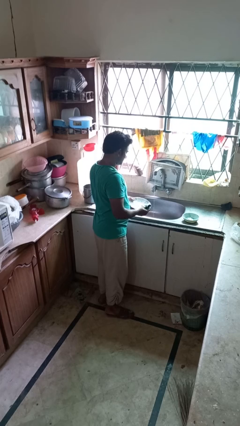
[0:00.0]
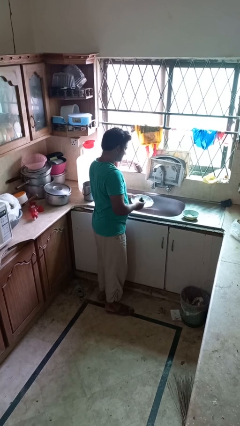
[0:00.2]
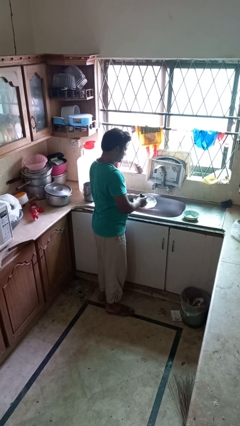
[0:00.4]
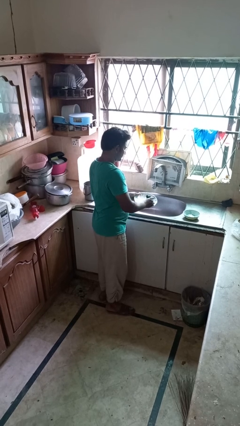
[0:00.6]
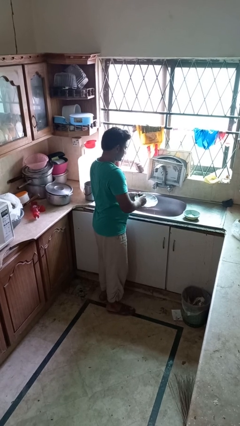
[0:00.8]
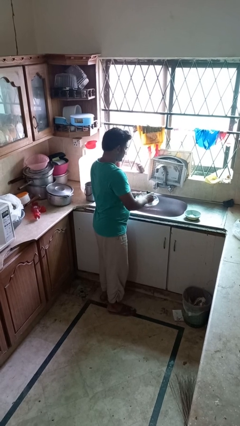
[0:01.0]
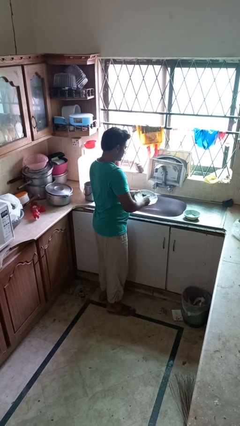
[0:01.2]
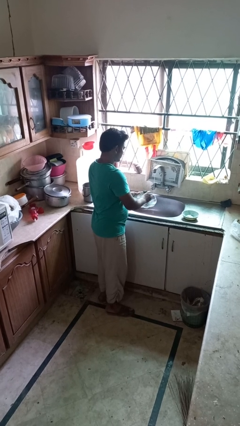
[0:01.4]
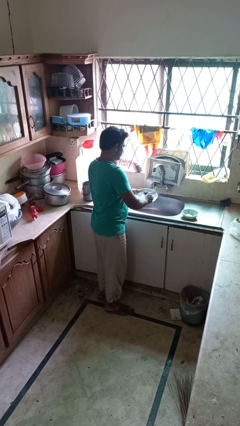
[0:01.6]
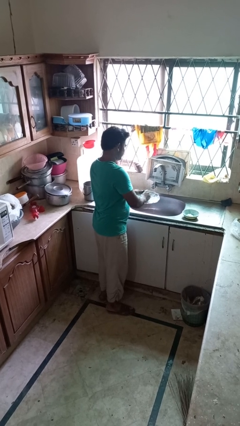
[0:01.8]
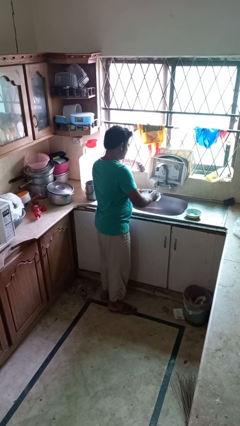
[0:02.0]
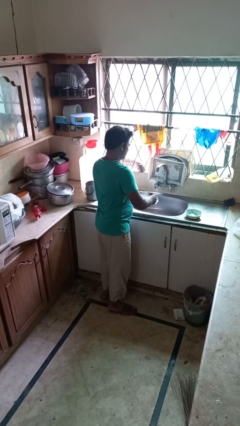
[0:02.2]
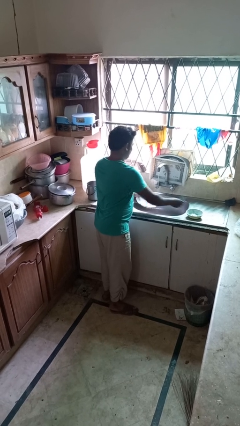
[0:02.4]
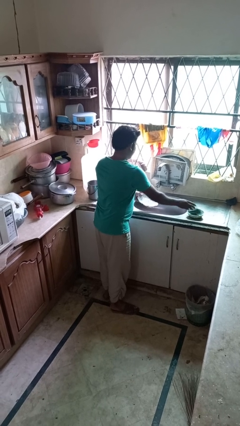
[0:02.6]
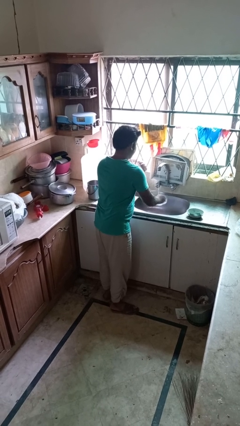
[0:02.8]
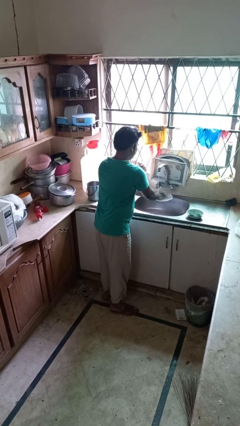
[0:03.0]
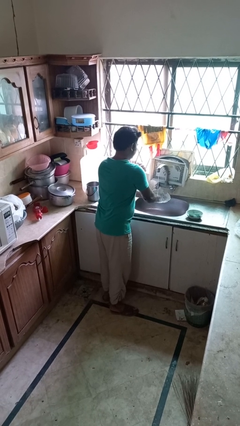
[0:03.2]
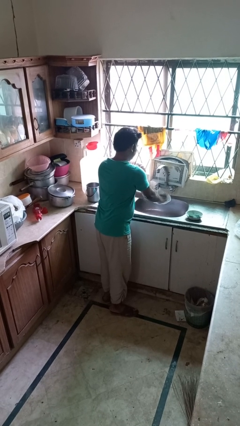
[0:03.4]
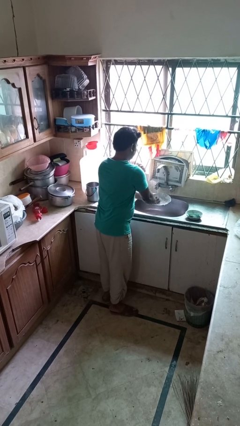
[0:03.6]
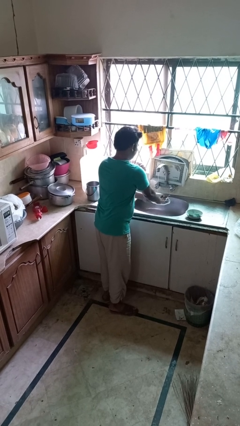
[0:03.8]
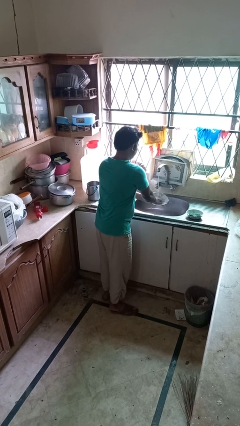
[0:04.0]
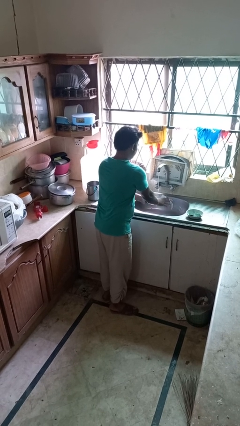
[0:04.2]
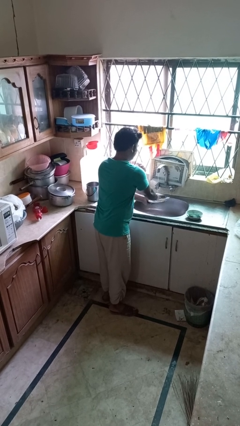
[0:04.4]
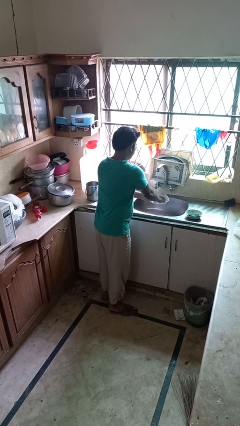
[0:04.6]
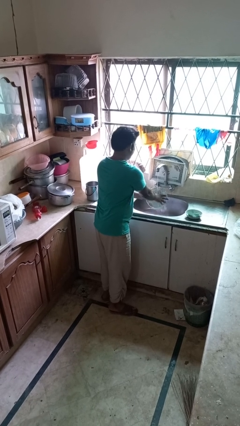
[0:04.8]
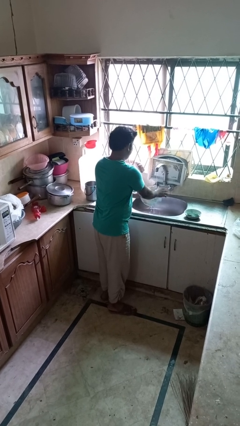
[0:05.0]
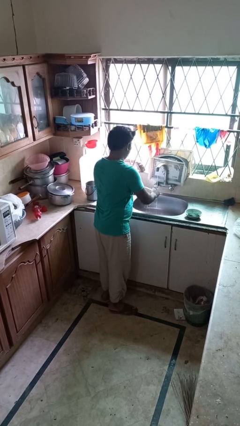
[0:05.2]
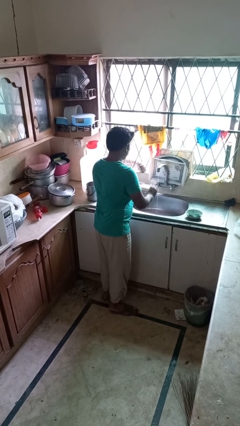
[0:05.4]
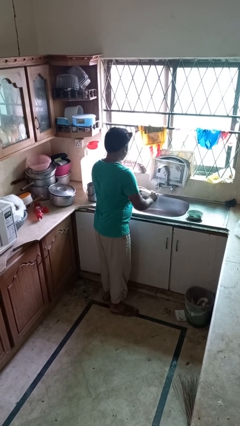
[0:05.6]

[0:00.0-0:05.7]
person washes dish

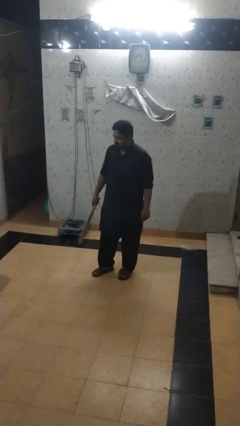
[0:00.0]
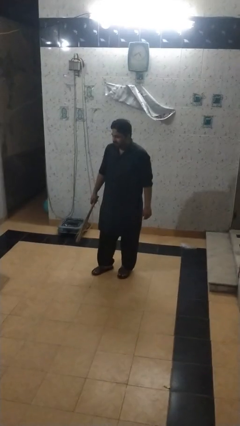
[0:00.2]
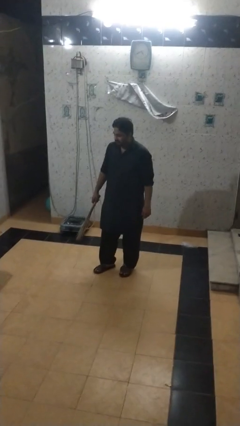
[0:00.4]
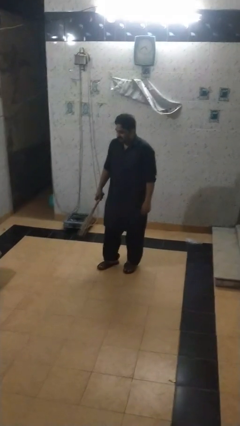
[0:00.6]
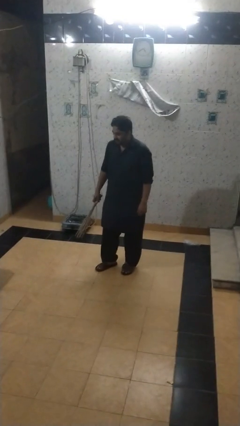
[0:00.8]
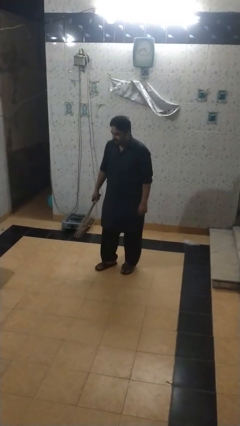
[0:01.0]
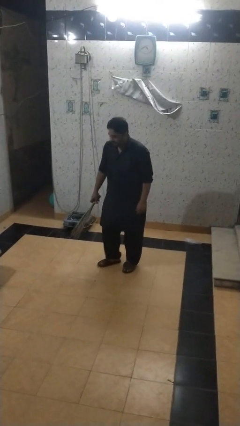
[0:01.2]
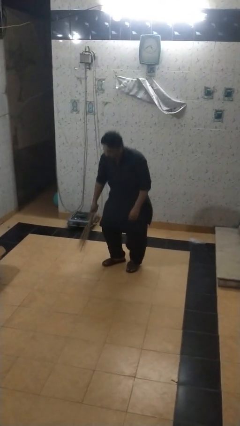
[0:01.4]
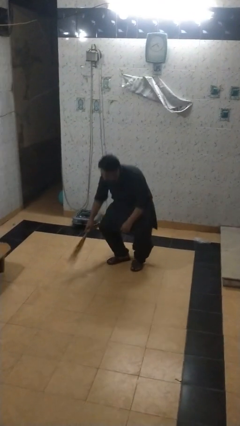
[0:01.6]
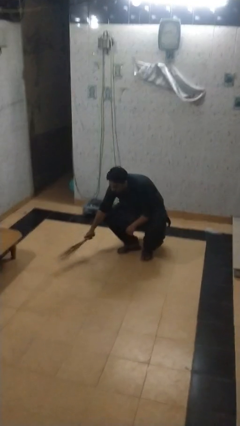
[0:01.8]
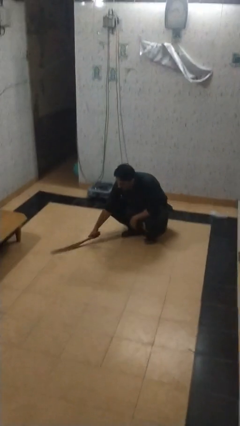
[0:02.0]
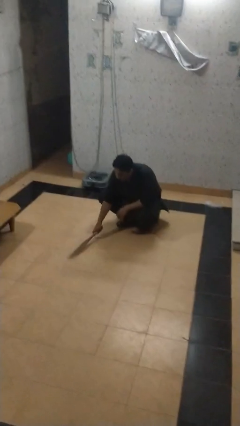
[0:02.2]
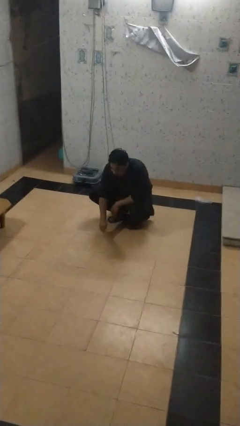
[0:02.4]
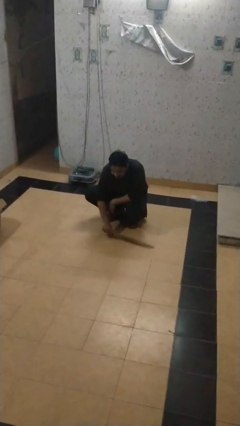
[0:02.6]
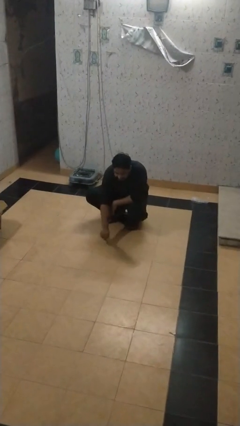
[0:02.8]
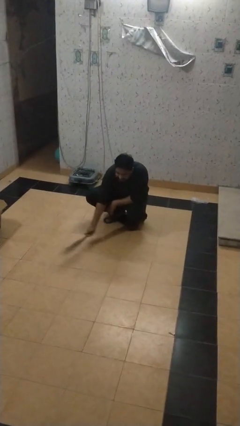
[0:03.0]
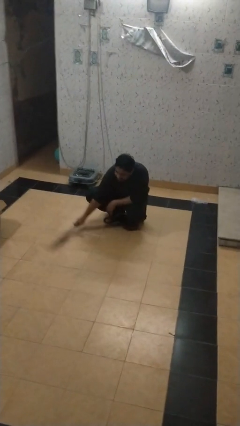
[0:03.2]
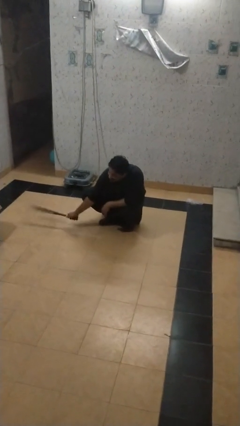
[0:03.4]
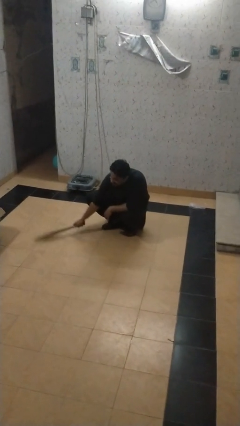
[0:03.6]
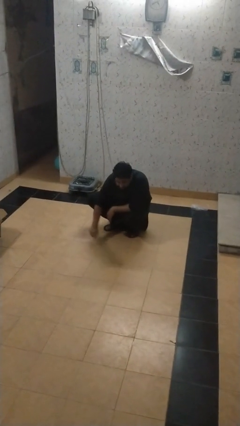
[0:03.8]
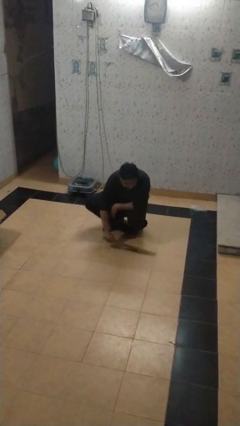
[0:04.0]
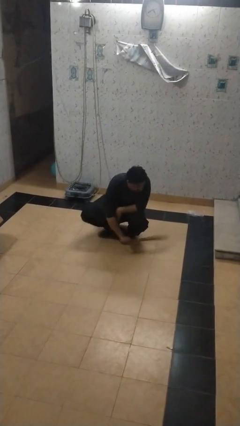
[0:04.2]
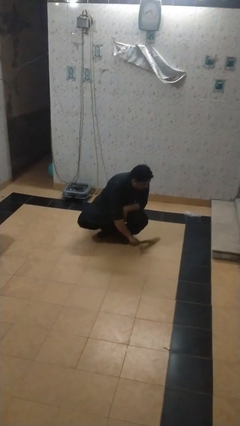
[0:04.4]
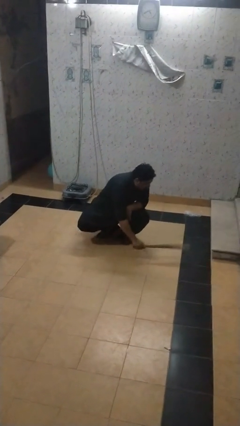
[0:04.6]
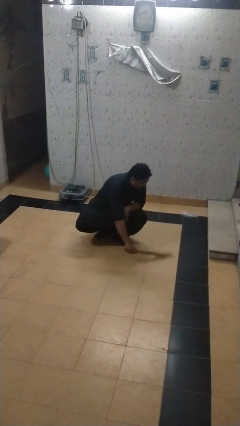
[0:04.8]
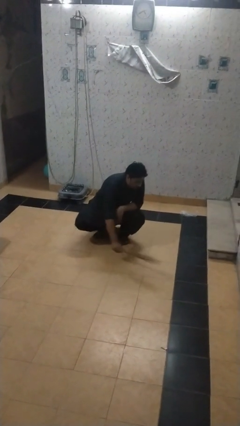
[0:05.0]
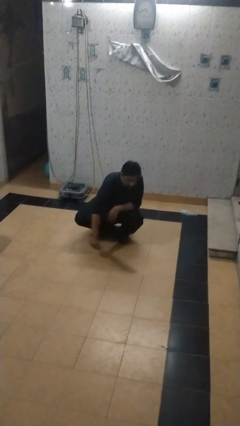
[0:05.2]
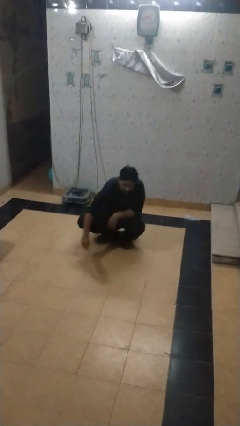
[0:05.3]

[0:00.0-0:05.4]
person sweeps floor

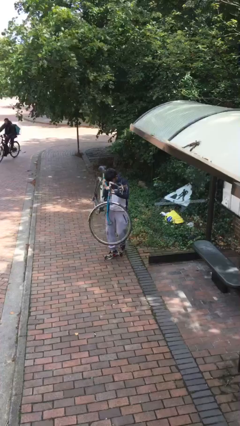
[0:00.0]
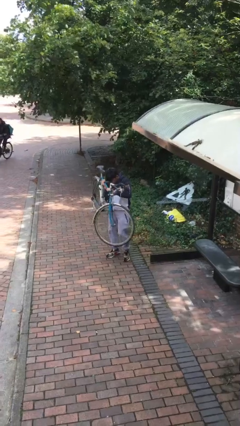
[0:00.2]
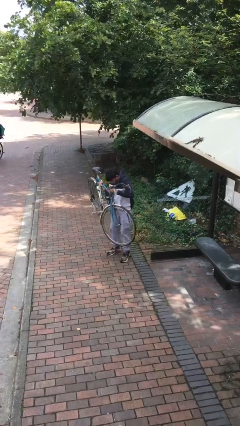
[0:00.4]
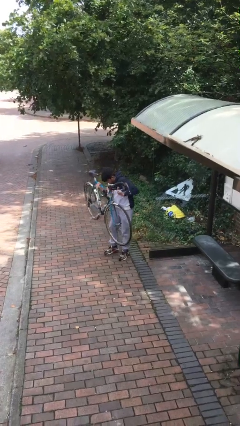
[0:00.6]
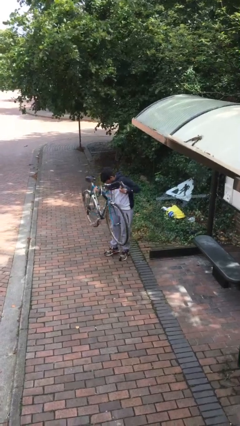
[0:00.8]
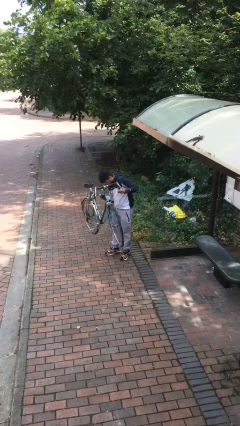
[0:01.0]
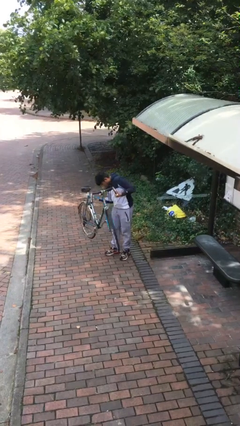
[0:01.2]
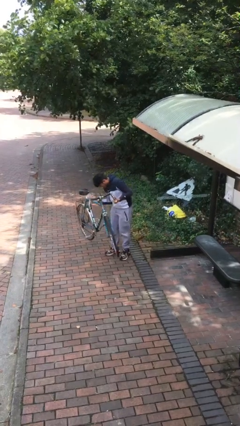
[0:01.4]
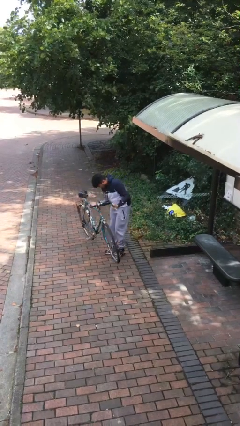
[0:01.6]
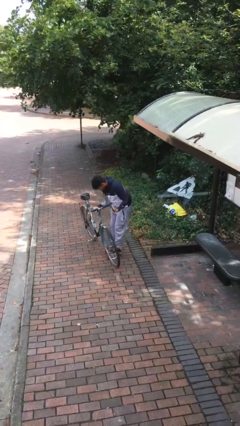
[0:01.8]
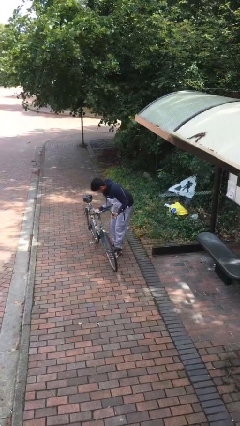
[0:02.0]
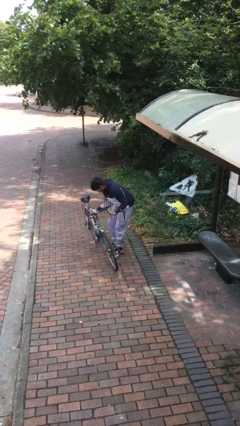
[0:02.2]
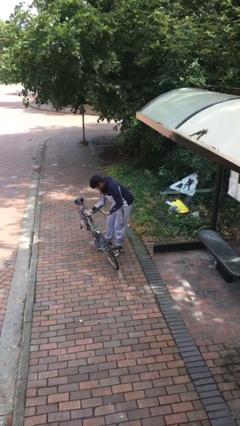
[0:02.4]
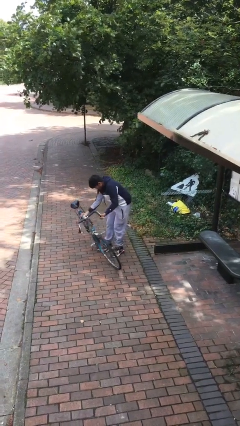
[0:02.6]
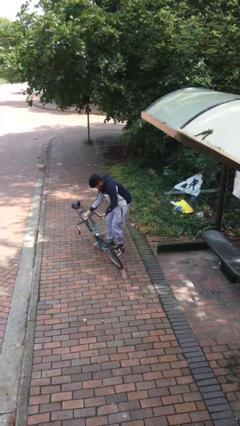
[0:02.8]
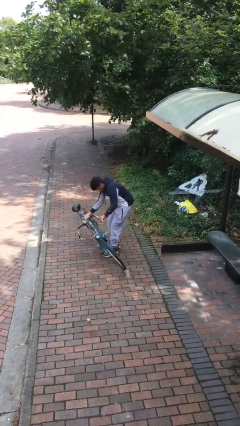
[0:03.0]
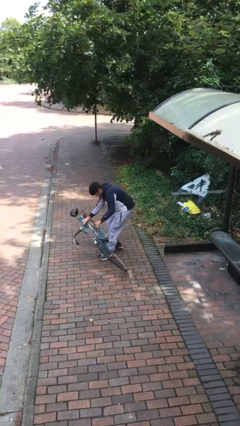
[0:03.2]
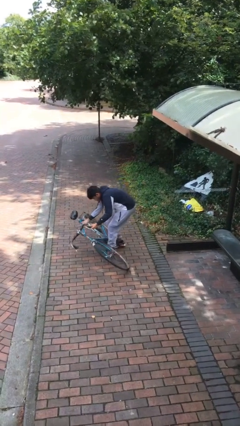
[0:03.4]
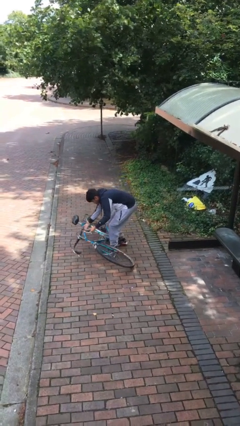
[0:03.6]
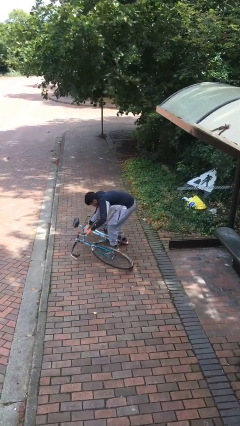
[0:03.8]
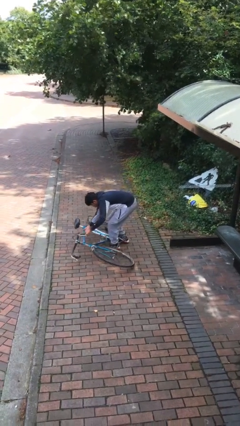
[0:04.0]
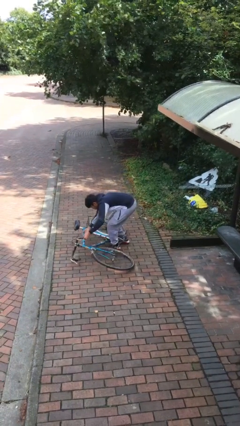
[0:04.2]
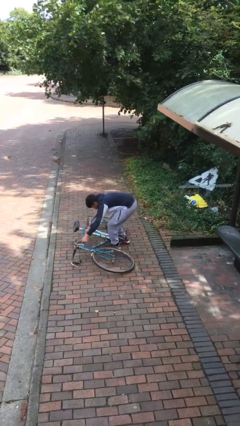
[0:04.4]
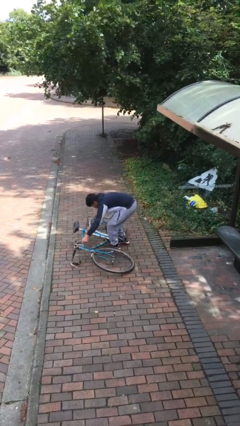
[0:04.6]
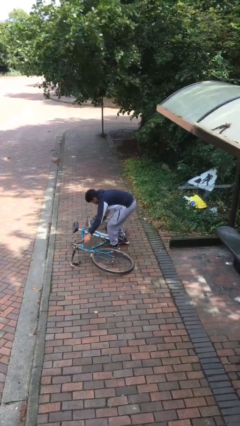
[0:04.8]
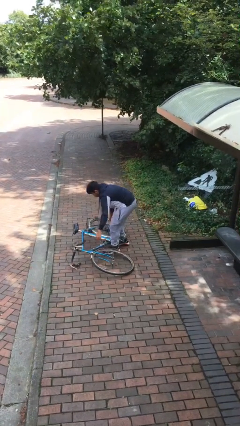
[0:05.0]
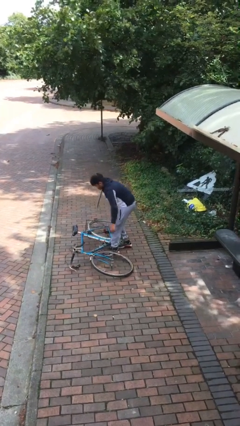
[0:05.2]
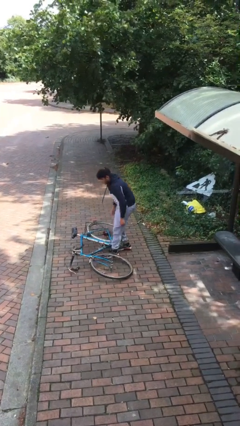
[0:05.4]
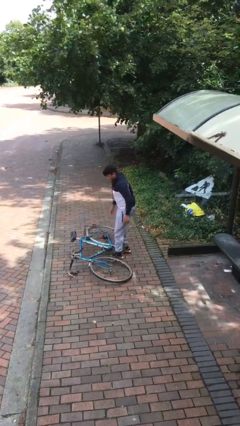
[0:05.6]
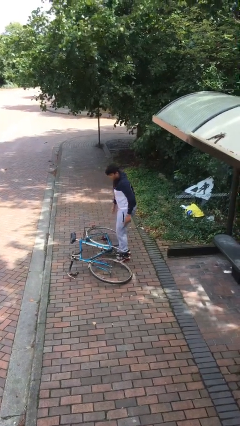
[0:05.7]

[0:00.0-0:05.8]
person puts down object on floor

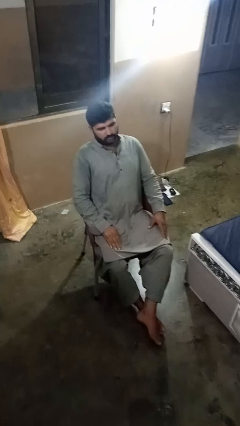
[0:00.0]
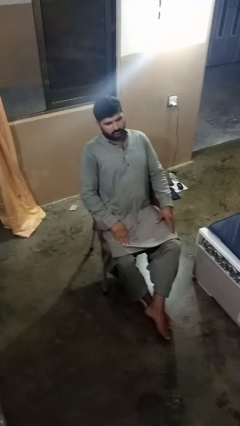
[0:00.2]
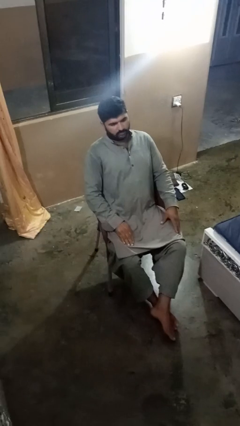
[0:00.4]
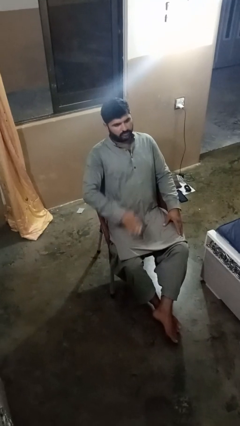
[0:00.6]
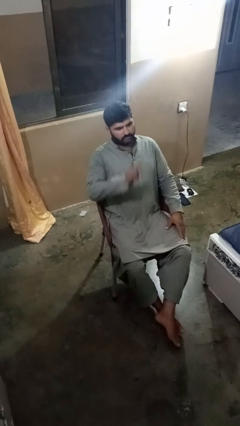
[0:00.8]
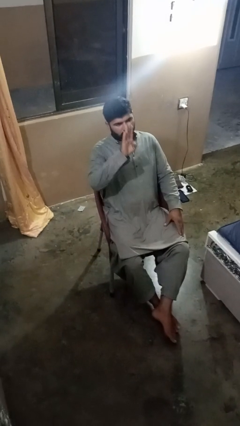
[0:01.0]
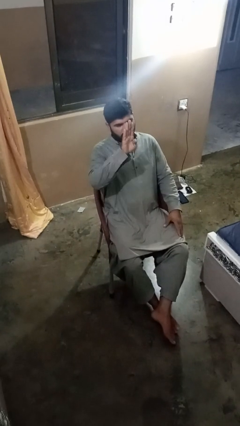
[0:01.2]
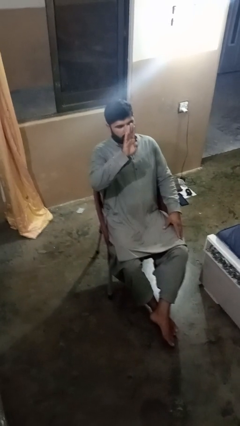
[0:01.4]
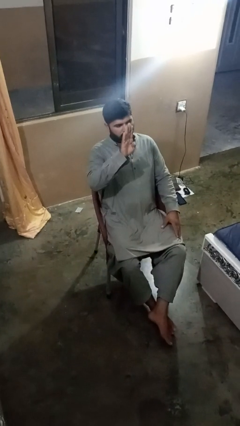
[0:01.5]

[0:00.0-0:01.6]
person gestures number four
